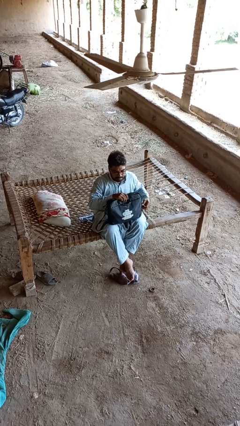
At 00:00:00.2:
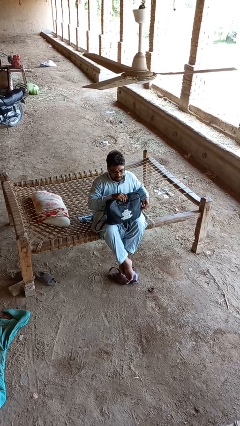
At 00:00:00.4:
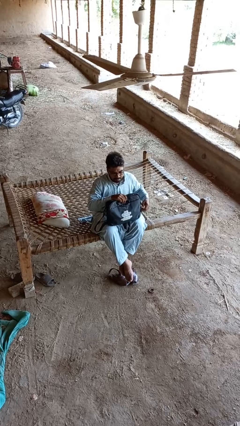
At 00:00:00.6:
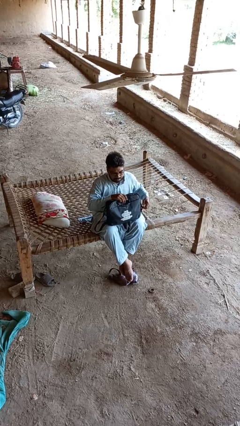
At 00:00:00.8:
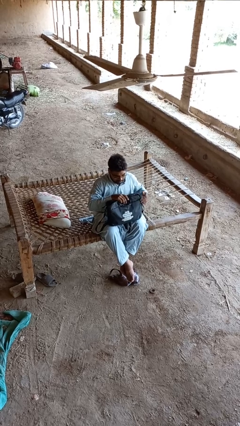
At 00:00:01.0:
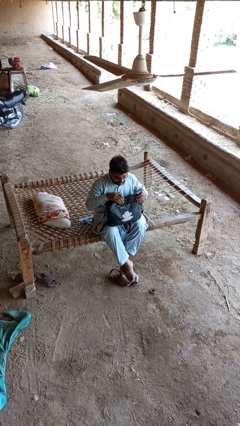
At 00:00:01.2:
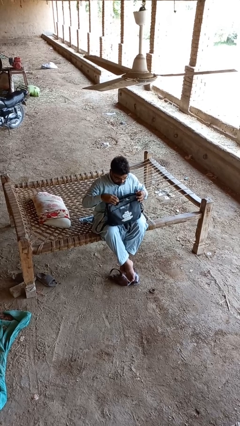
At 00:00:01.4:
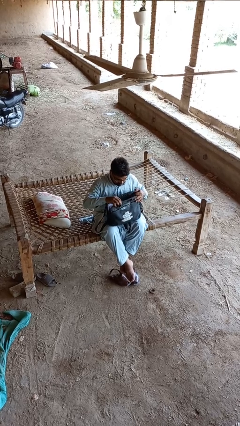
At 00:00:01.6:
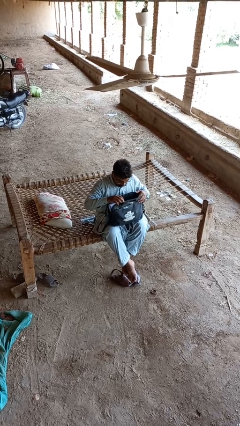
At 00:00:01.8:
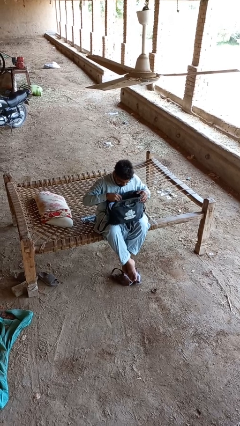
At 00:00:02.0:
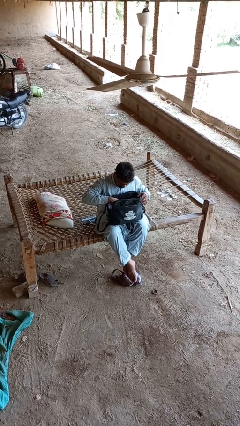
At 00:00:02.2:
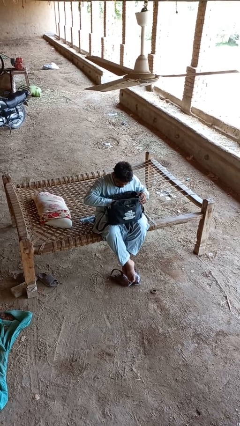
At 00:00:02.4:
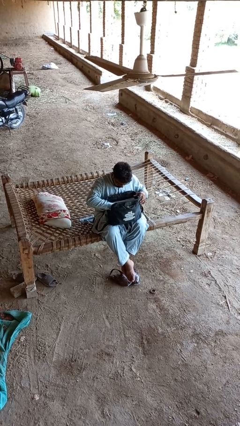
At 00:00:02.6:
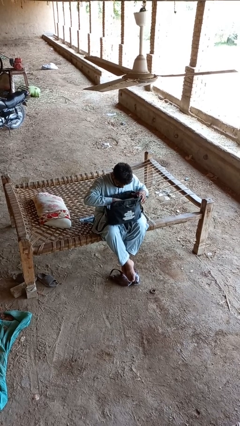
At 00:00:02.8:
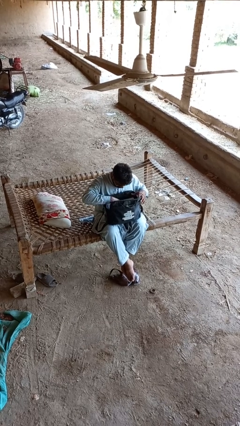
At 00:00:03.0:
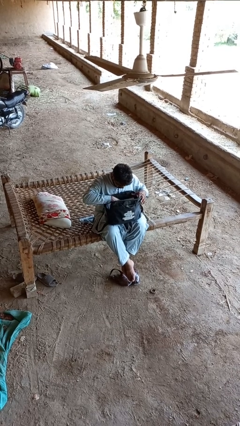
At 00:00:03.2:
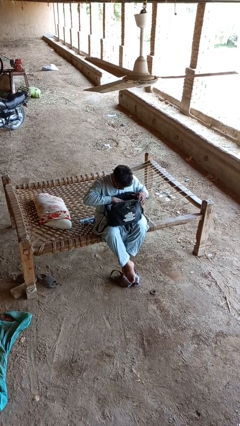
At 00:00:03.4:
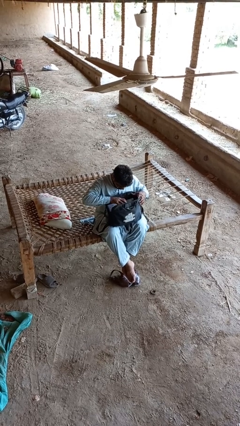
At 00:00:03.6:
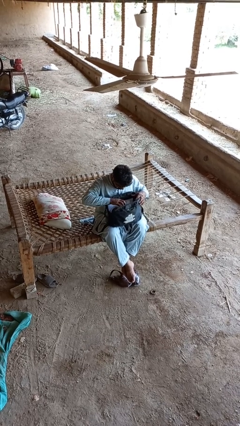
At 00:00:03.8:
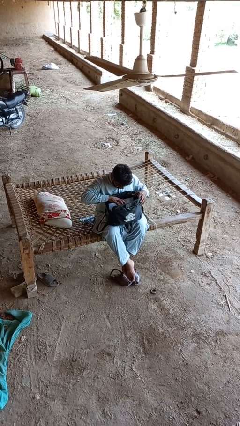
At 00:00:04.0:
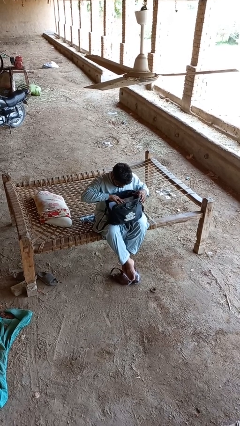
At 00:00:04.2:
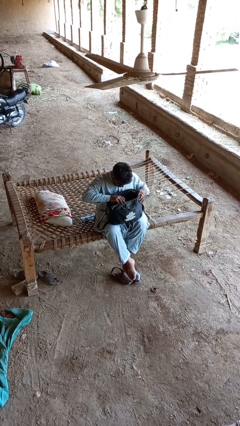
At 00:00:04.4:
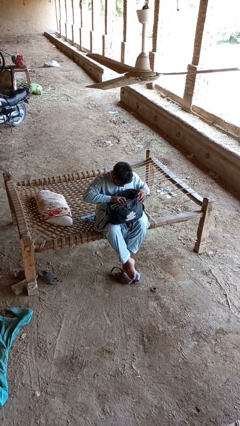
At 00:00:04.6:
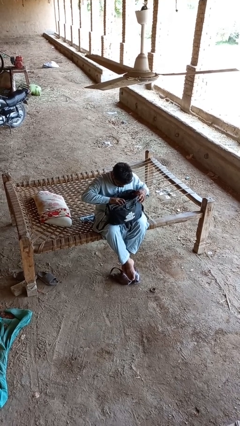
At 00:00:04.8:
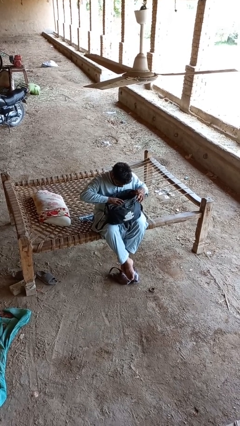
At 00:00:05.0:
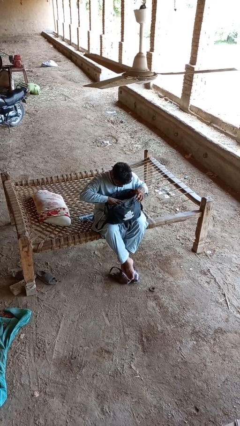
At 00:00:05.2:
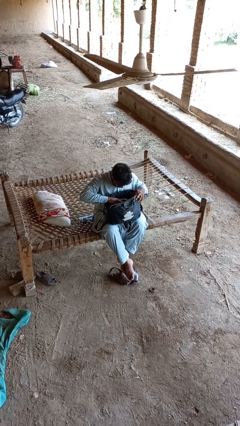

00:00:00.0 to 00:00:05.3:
person searches in backpack

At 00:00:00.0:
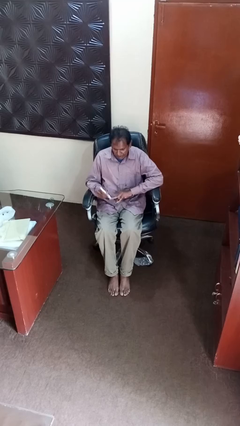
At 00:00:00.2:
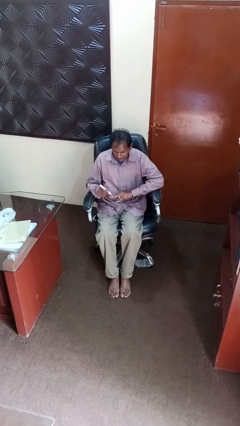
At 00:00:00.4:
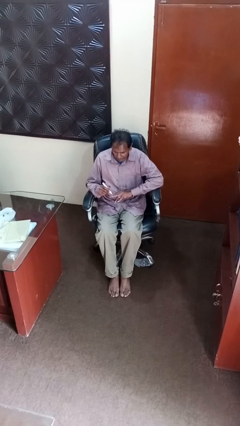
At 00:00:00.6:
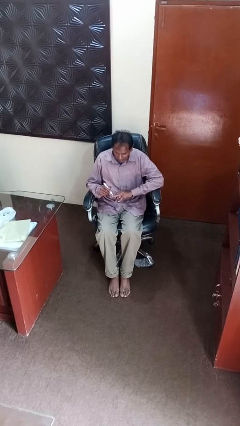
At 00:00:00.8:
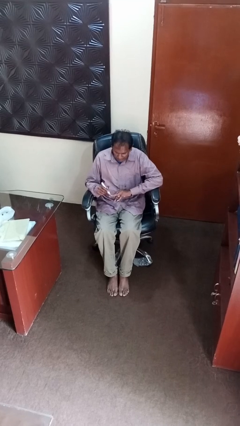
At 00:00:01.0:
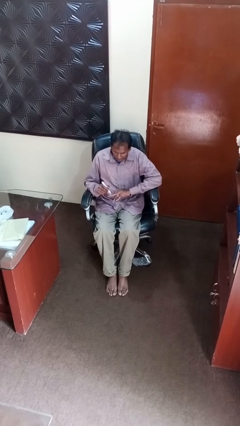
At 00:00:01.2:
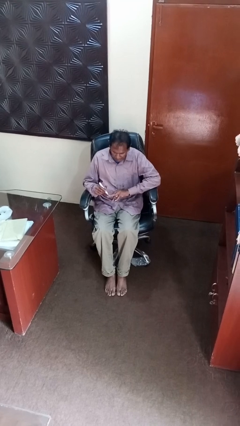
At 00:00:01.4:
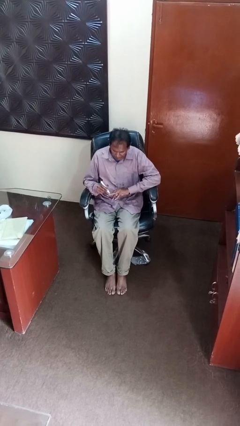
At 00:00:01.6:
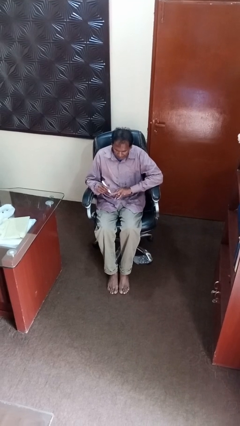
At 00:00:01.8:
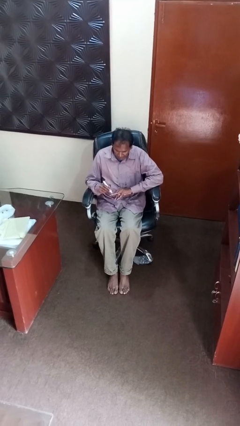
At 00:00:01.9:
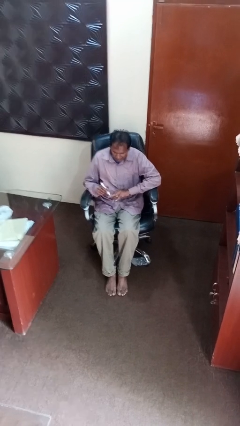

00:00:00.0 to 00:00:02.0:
person paints fingernails

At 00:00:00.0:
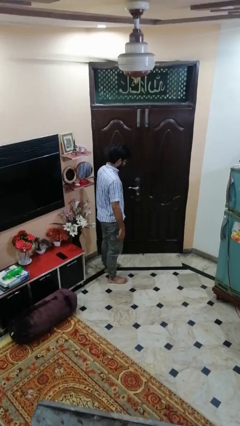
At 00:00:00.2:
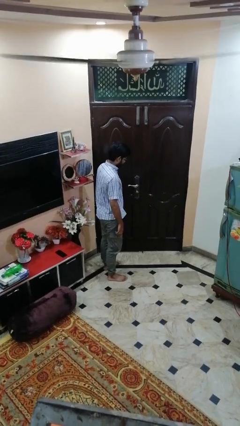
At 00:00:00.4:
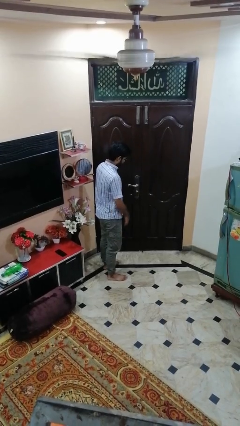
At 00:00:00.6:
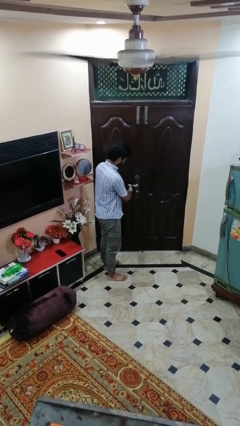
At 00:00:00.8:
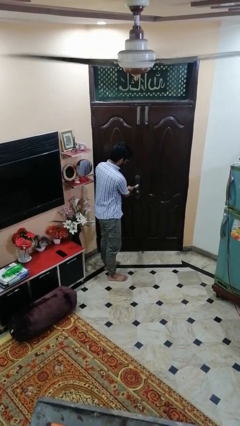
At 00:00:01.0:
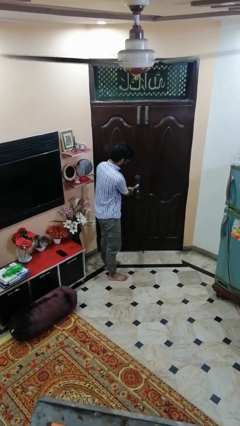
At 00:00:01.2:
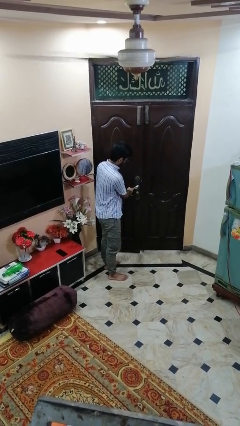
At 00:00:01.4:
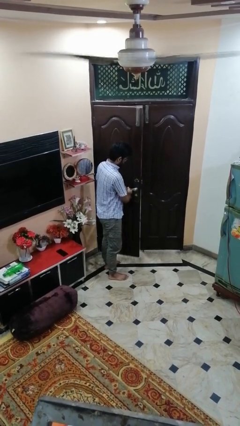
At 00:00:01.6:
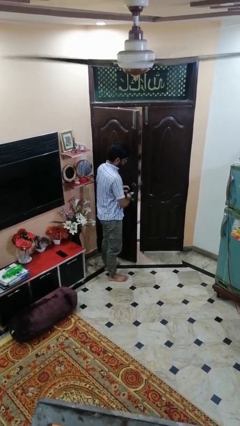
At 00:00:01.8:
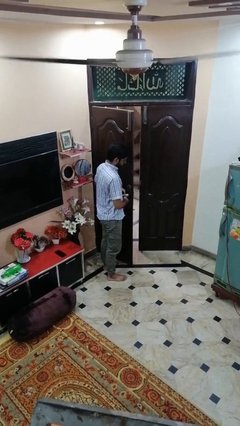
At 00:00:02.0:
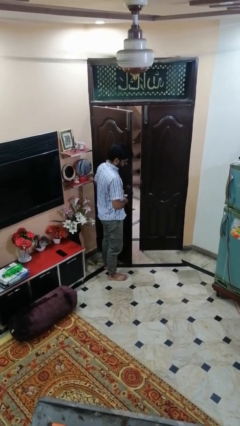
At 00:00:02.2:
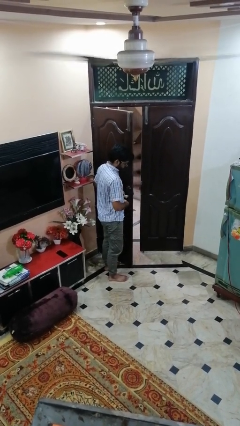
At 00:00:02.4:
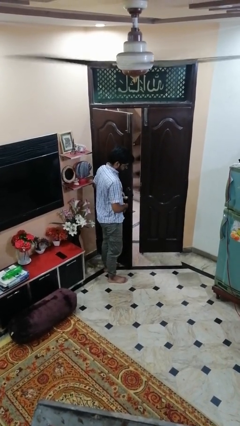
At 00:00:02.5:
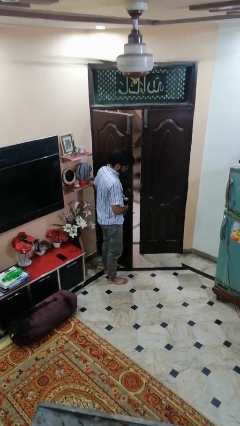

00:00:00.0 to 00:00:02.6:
person opens facility door

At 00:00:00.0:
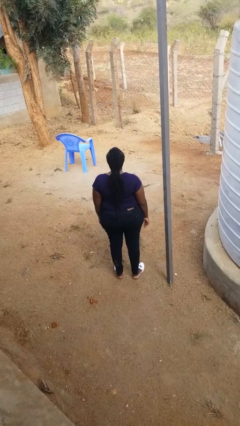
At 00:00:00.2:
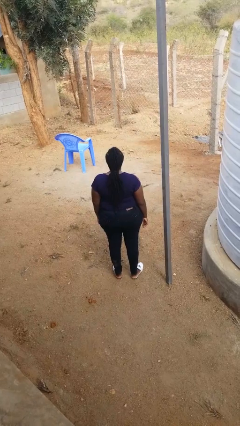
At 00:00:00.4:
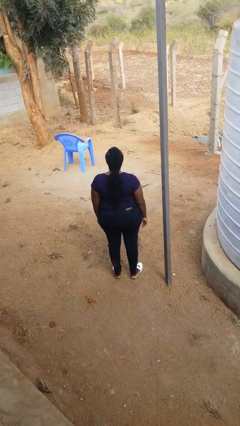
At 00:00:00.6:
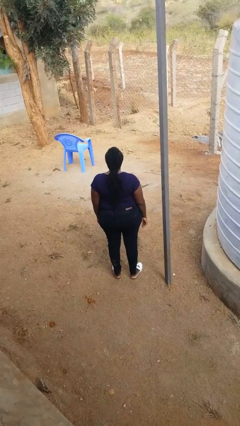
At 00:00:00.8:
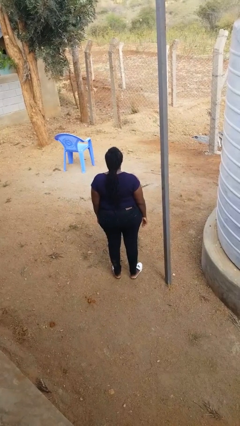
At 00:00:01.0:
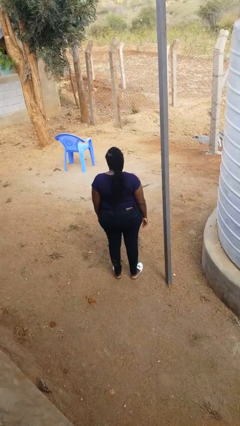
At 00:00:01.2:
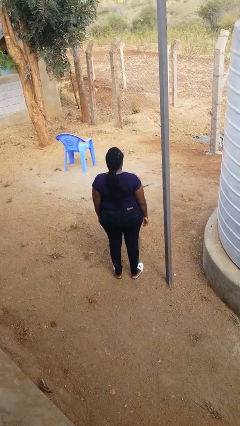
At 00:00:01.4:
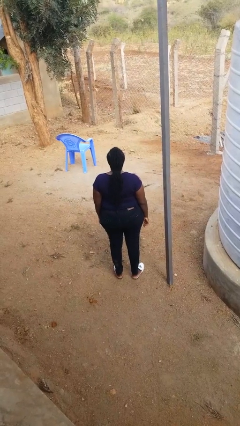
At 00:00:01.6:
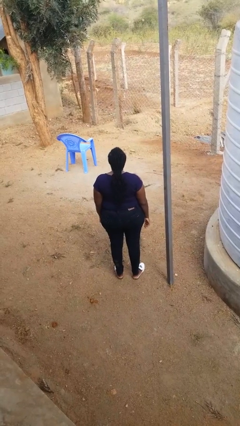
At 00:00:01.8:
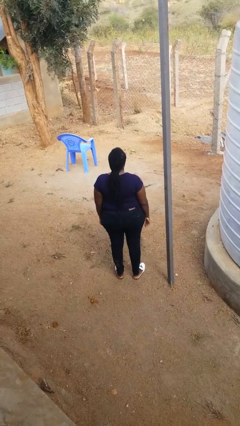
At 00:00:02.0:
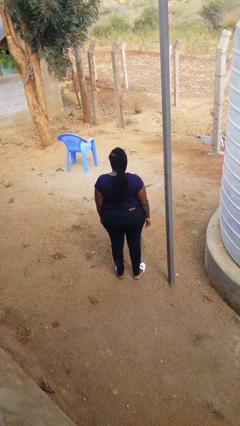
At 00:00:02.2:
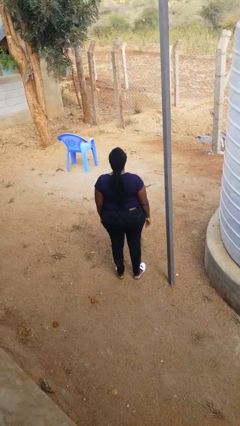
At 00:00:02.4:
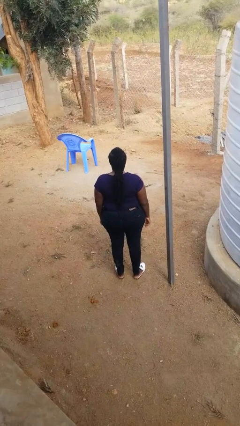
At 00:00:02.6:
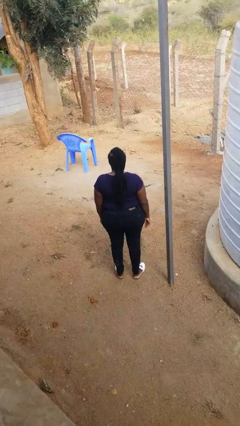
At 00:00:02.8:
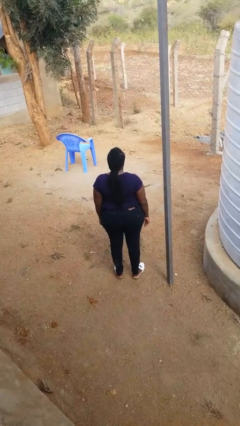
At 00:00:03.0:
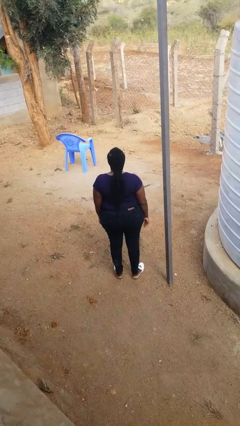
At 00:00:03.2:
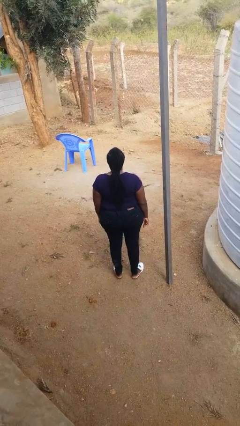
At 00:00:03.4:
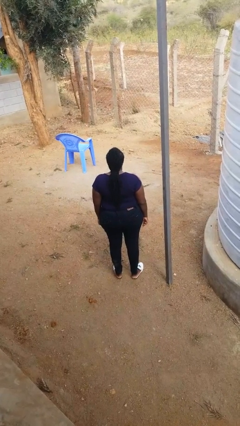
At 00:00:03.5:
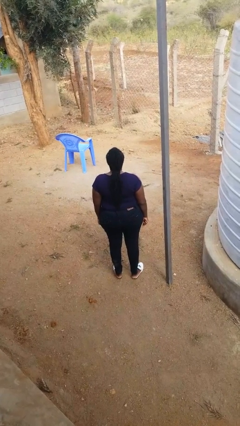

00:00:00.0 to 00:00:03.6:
person shakes head

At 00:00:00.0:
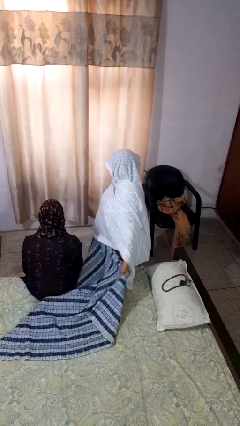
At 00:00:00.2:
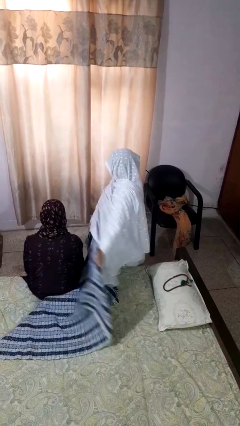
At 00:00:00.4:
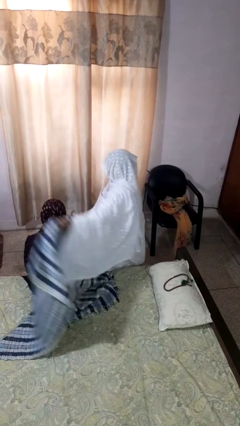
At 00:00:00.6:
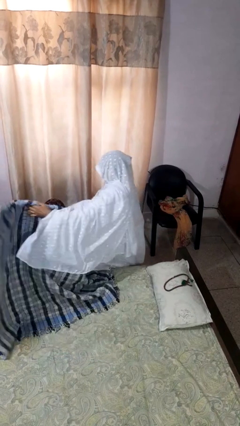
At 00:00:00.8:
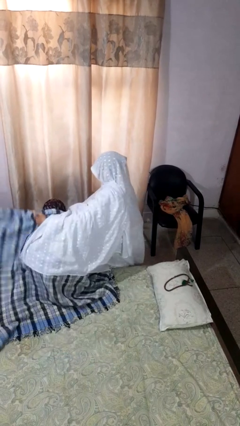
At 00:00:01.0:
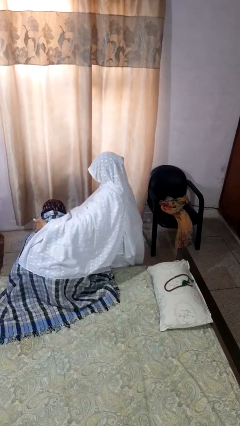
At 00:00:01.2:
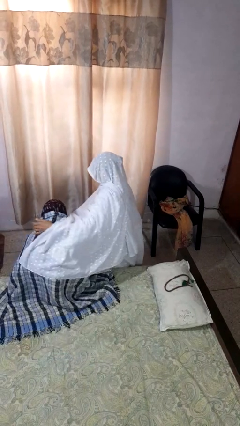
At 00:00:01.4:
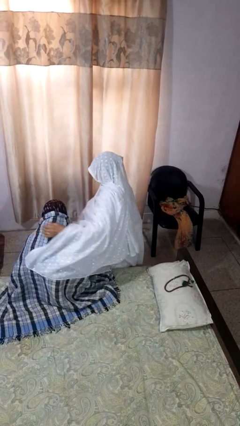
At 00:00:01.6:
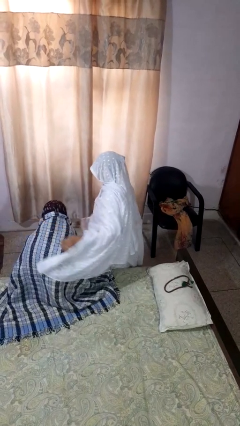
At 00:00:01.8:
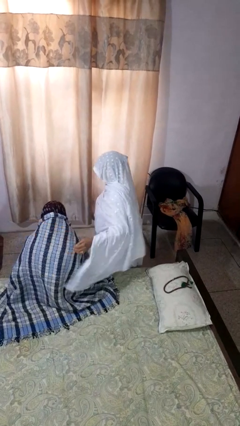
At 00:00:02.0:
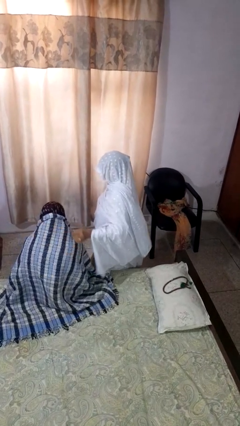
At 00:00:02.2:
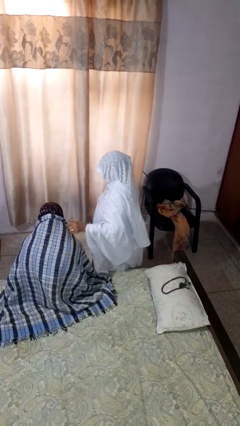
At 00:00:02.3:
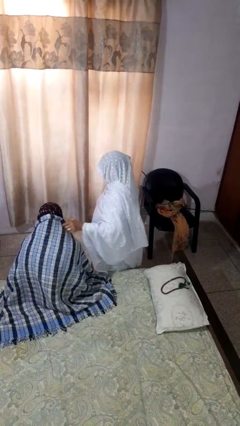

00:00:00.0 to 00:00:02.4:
person covers friend with blanket

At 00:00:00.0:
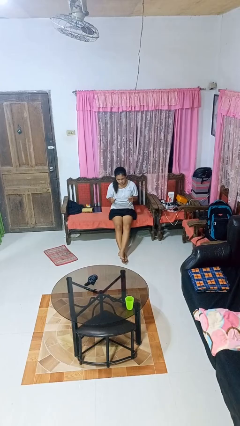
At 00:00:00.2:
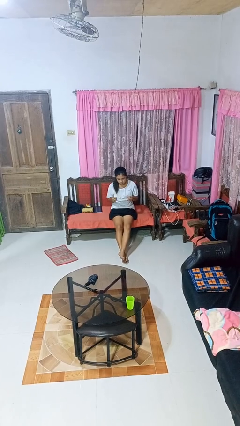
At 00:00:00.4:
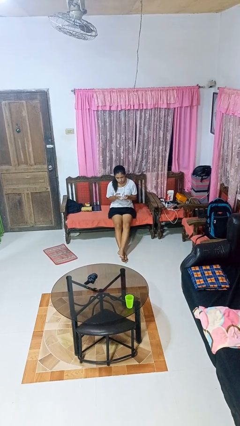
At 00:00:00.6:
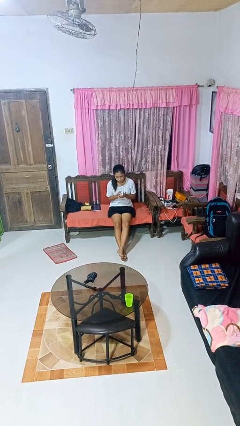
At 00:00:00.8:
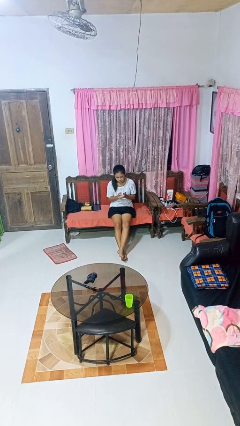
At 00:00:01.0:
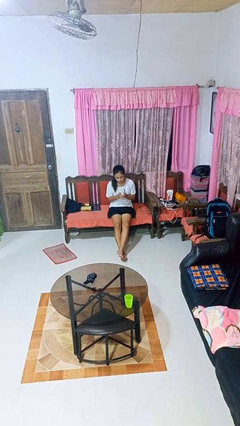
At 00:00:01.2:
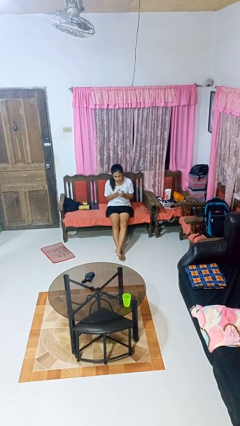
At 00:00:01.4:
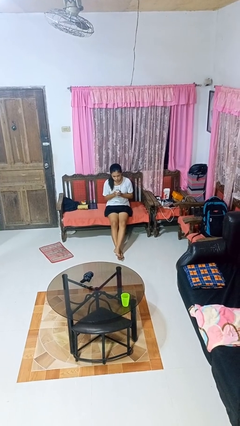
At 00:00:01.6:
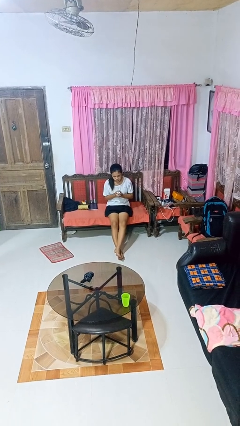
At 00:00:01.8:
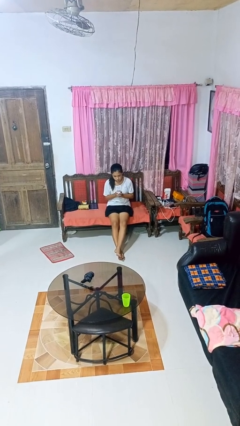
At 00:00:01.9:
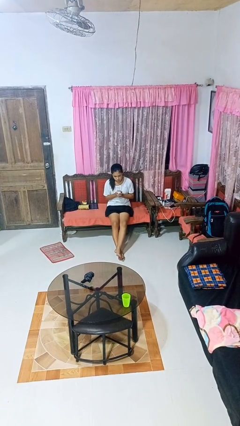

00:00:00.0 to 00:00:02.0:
person crumples paper
